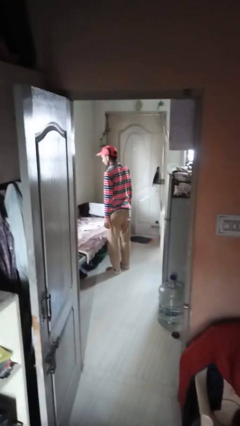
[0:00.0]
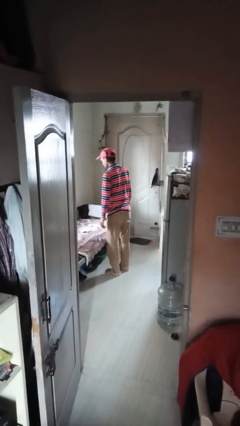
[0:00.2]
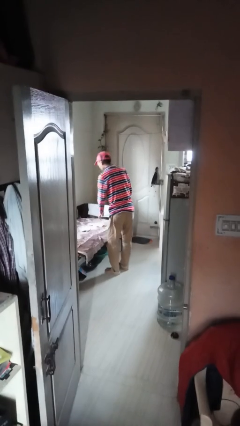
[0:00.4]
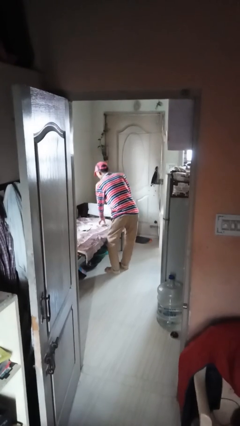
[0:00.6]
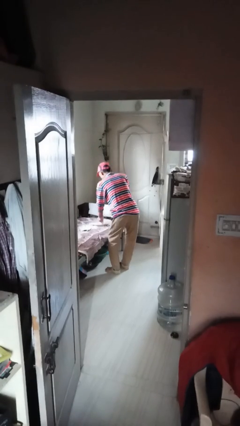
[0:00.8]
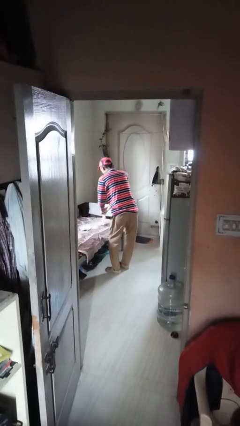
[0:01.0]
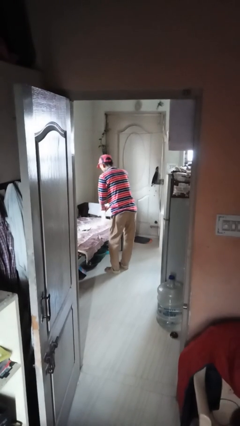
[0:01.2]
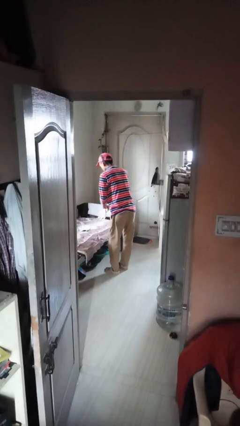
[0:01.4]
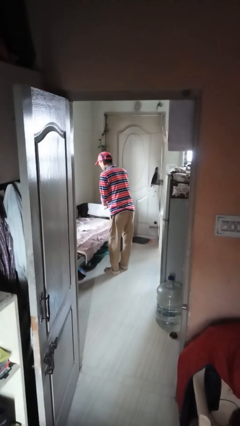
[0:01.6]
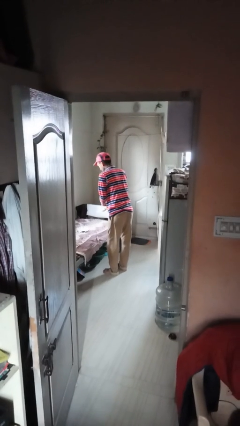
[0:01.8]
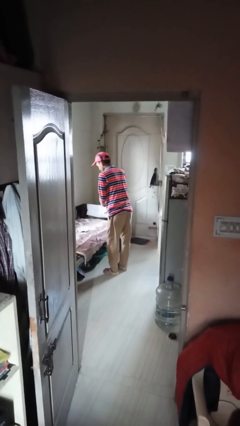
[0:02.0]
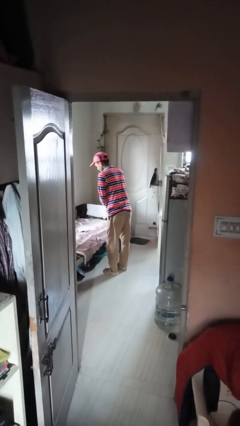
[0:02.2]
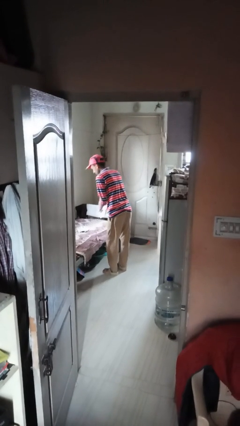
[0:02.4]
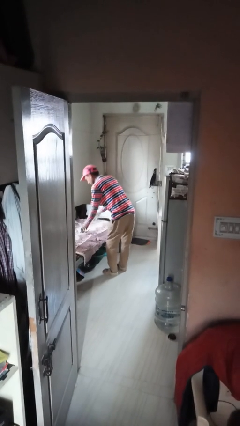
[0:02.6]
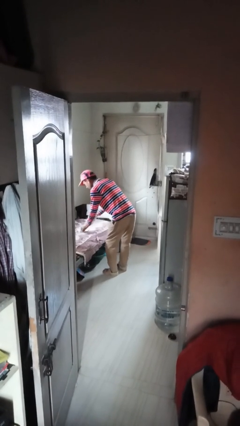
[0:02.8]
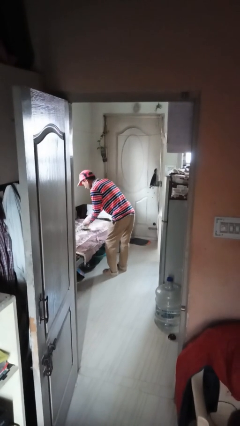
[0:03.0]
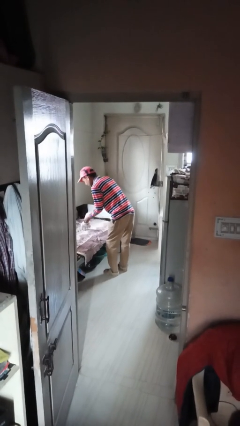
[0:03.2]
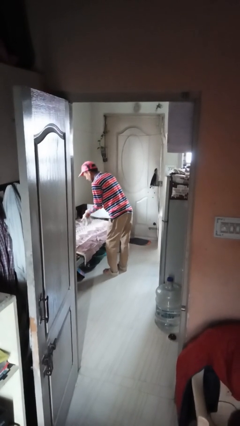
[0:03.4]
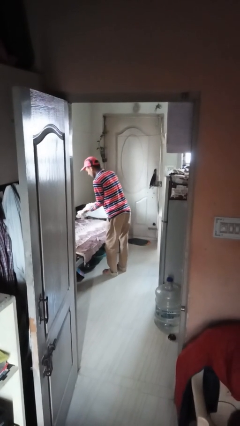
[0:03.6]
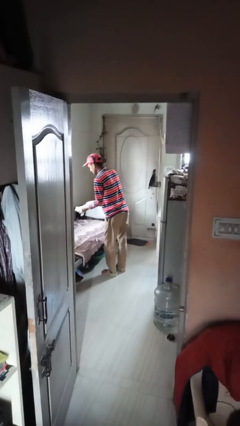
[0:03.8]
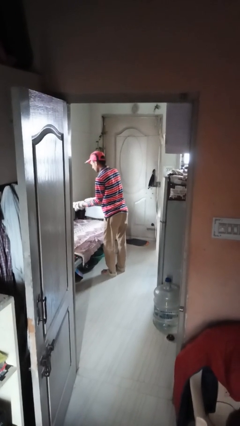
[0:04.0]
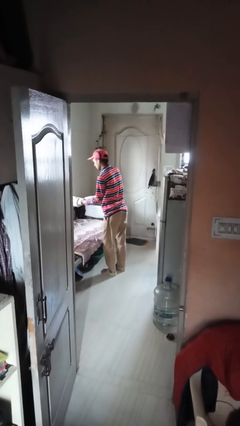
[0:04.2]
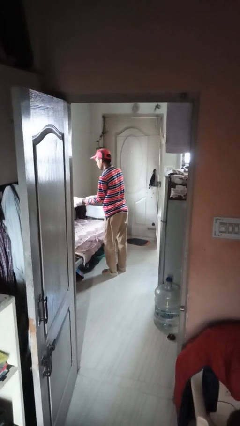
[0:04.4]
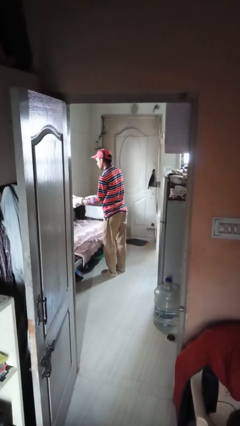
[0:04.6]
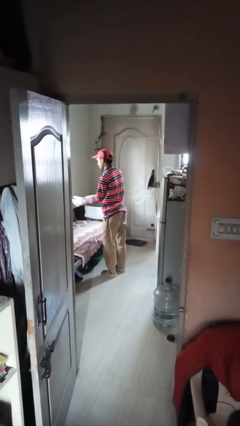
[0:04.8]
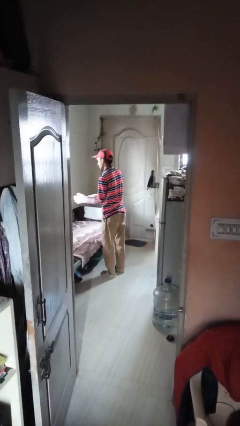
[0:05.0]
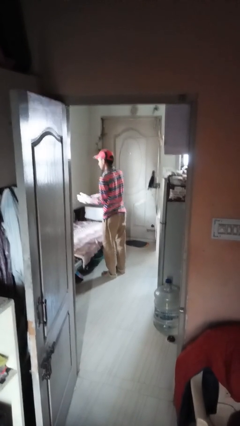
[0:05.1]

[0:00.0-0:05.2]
person puts on gloves

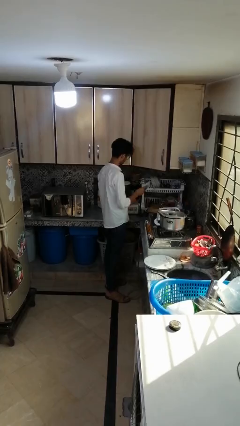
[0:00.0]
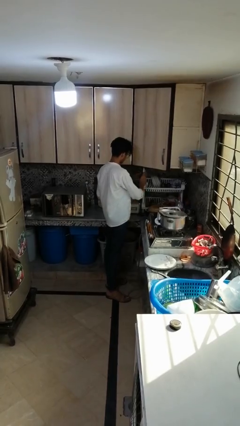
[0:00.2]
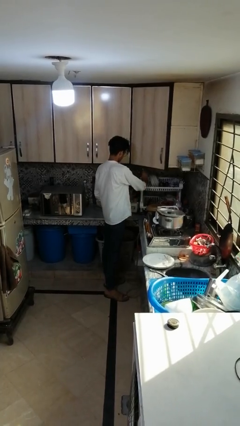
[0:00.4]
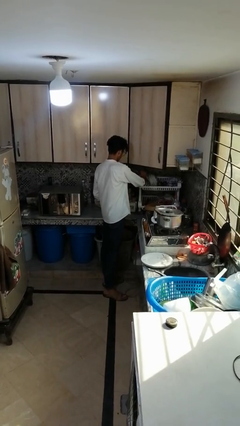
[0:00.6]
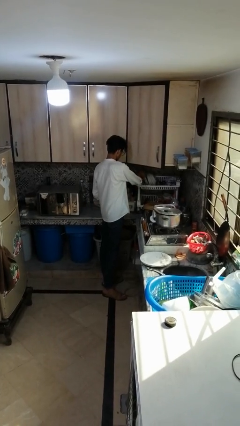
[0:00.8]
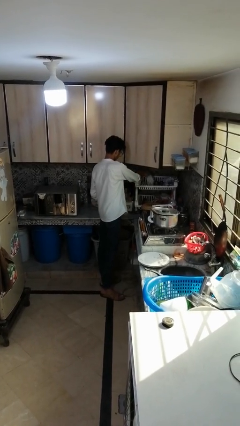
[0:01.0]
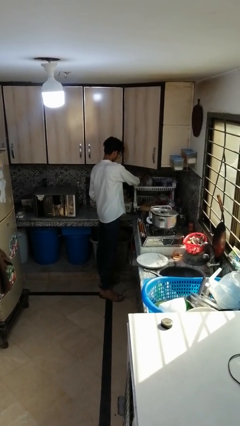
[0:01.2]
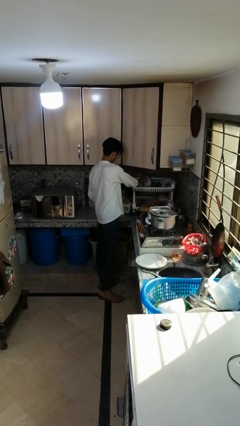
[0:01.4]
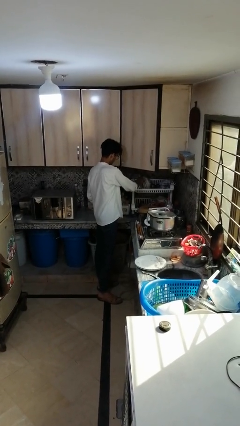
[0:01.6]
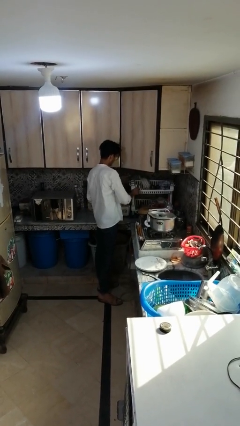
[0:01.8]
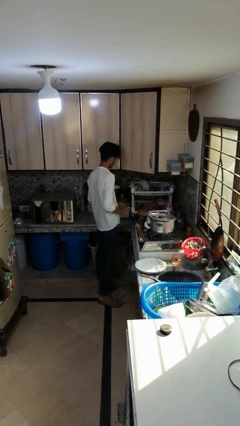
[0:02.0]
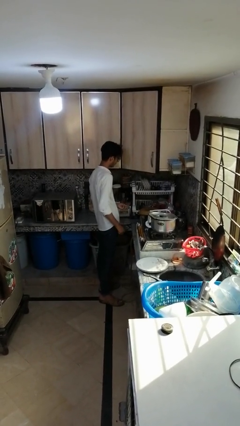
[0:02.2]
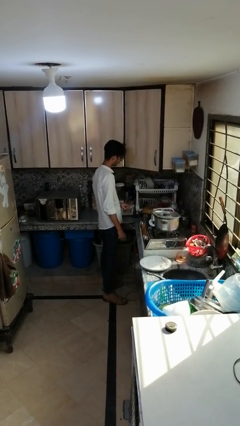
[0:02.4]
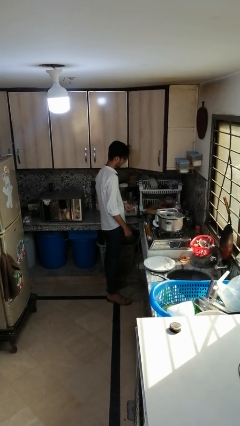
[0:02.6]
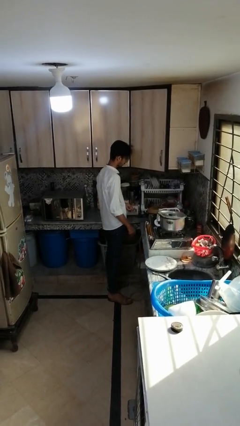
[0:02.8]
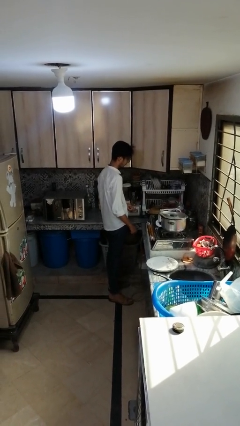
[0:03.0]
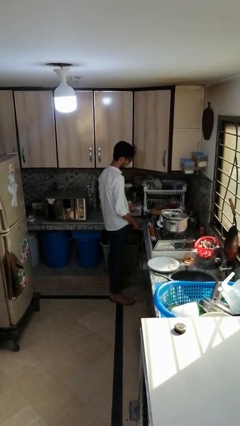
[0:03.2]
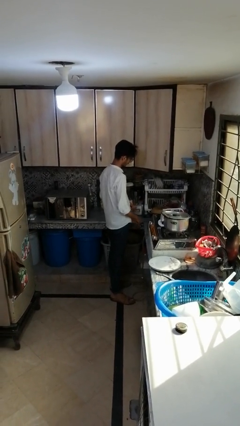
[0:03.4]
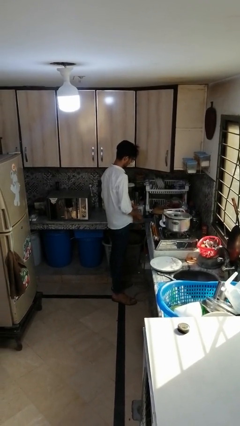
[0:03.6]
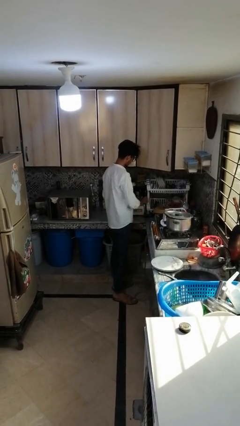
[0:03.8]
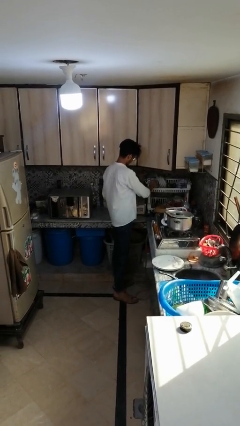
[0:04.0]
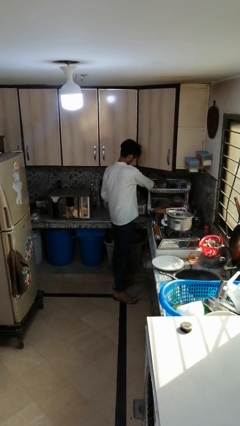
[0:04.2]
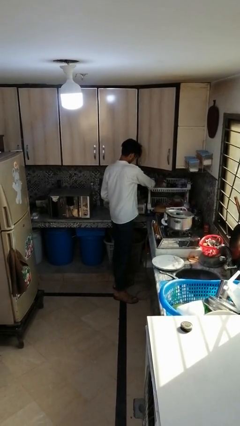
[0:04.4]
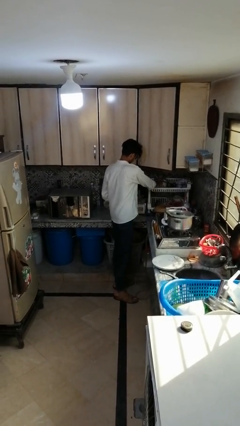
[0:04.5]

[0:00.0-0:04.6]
person loads dishwasher

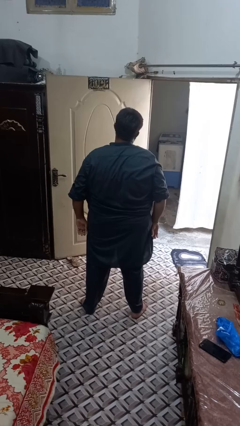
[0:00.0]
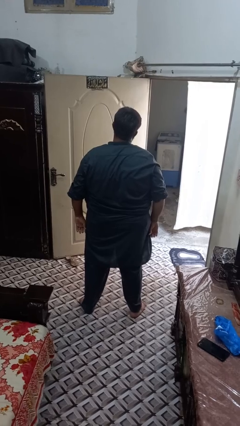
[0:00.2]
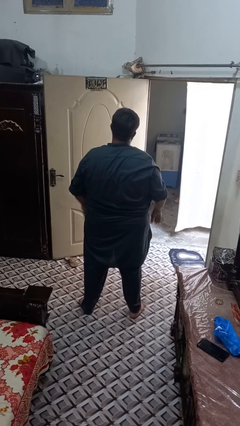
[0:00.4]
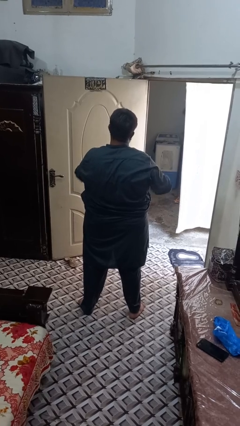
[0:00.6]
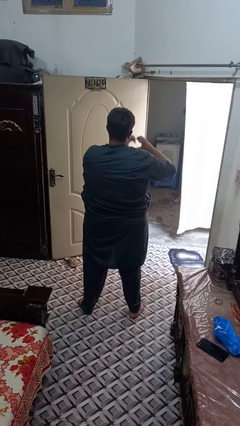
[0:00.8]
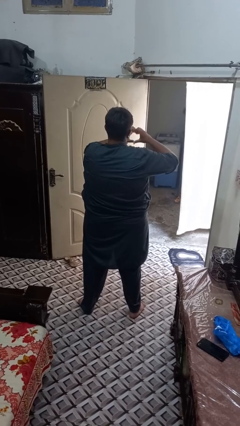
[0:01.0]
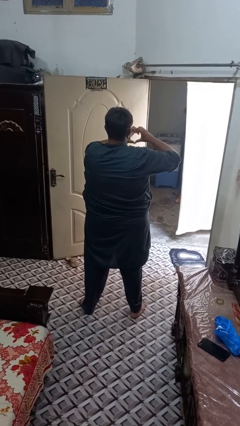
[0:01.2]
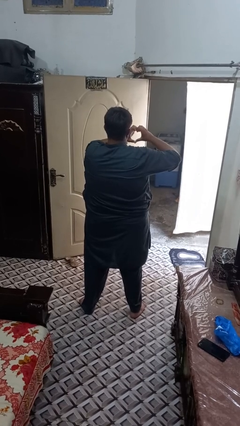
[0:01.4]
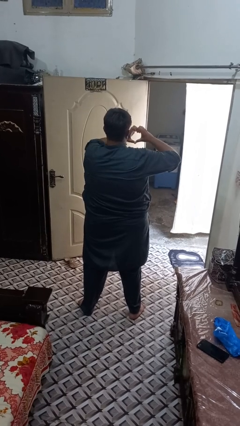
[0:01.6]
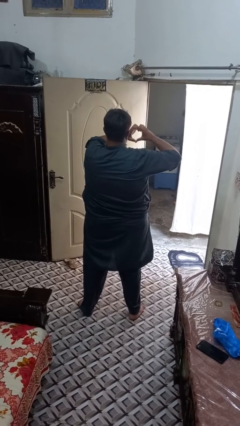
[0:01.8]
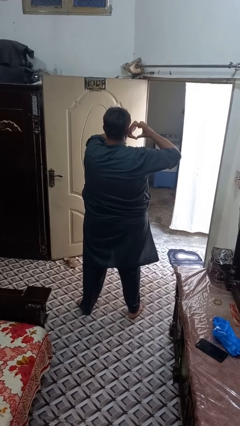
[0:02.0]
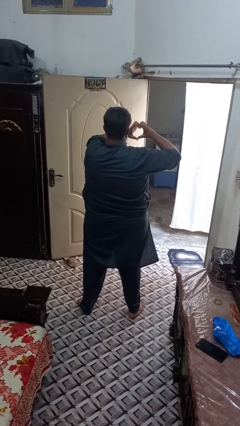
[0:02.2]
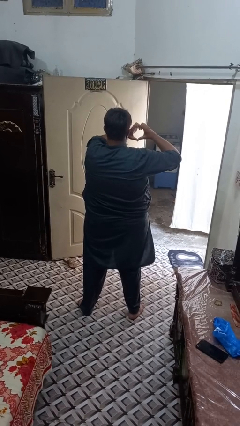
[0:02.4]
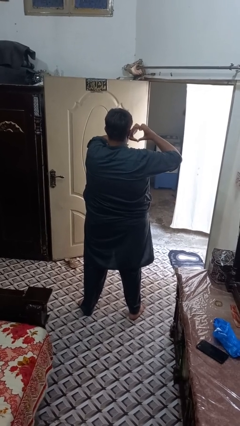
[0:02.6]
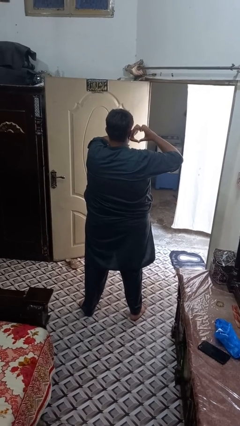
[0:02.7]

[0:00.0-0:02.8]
person gestures heart

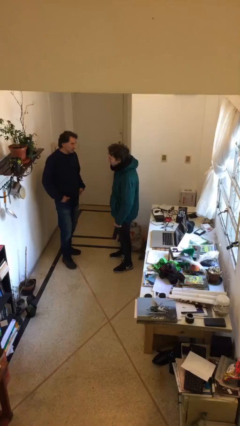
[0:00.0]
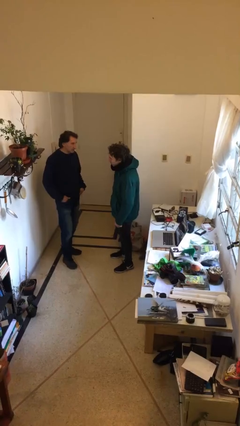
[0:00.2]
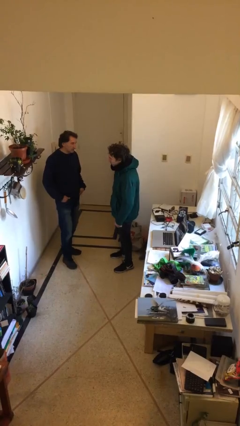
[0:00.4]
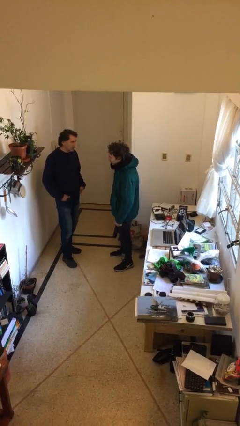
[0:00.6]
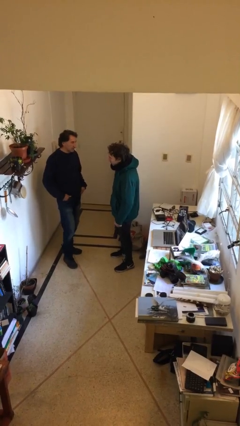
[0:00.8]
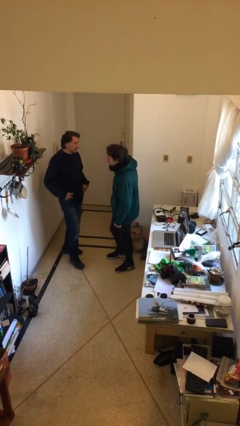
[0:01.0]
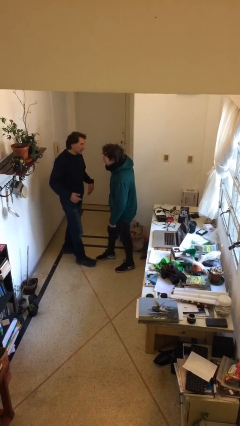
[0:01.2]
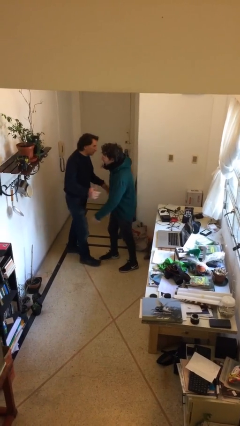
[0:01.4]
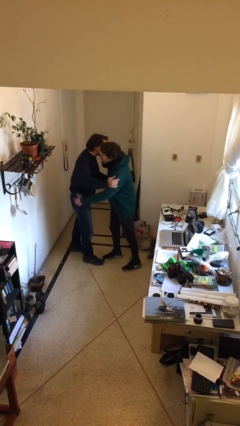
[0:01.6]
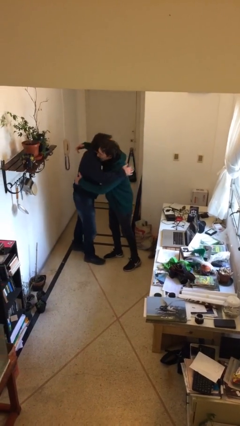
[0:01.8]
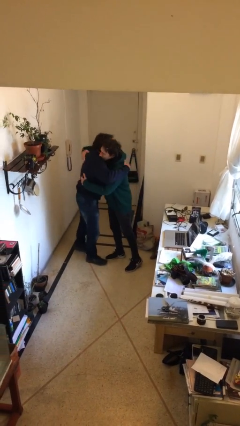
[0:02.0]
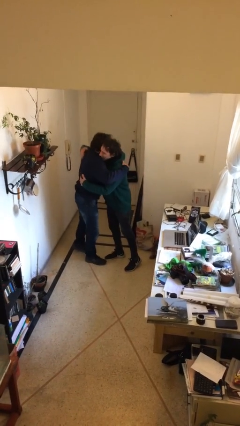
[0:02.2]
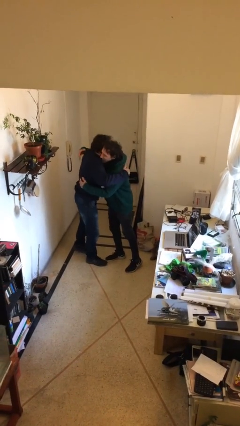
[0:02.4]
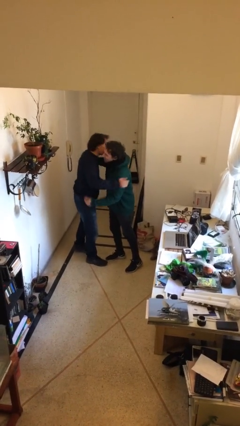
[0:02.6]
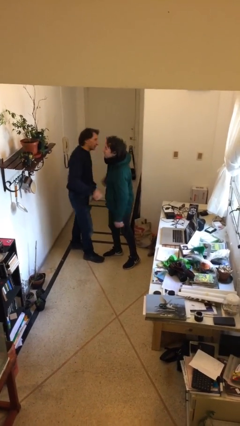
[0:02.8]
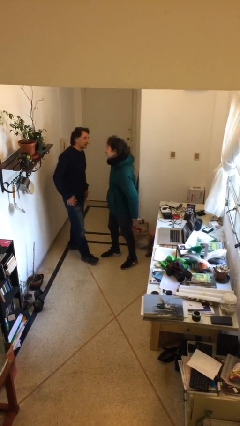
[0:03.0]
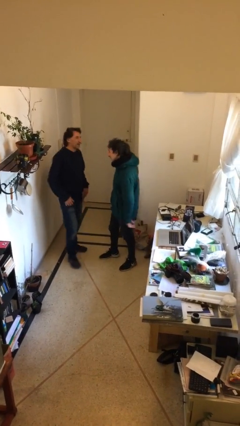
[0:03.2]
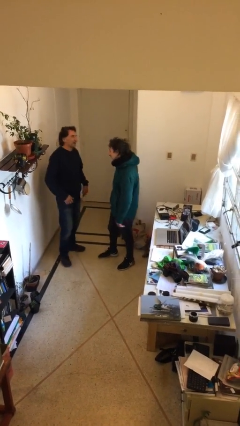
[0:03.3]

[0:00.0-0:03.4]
person embraces person

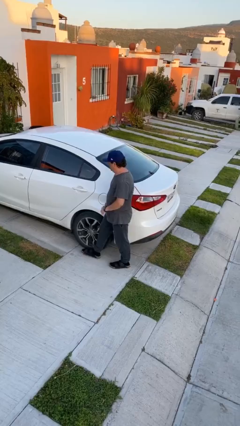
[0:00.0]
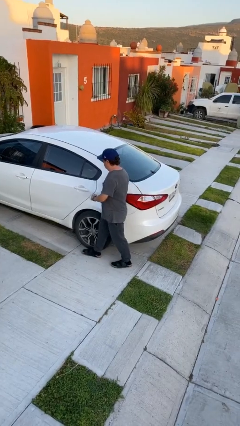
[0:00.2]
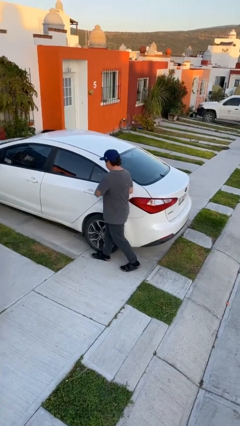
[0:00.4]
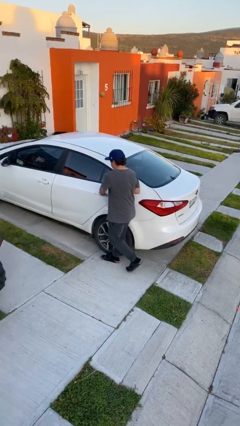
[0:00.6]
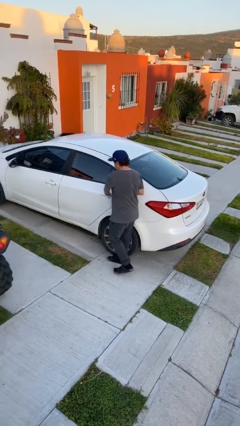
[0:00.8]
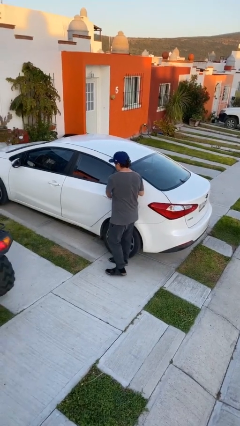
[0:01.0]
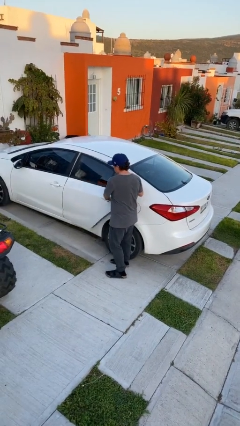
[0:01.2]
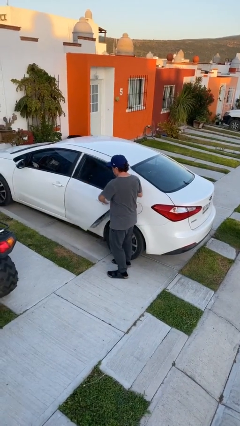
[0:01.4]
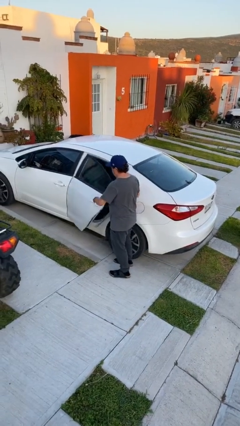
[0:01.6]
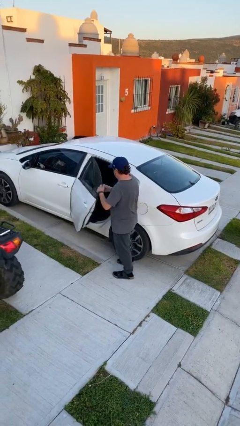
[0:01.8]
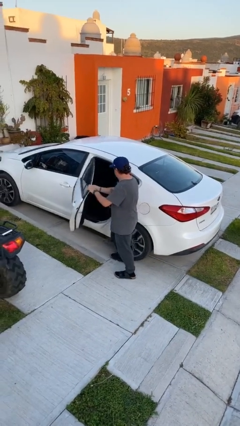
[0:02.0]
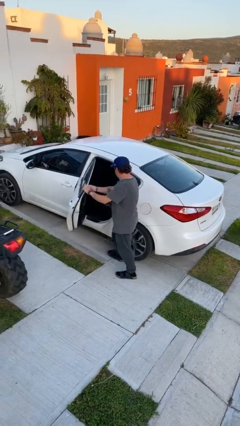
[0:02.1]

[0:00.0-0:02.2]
person opens car door
